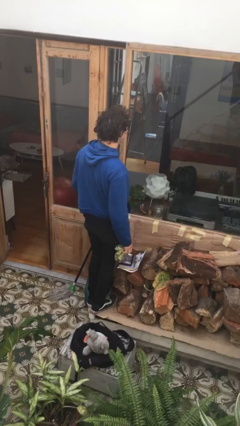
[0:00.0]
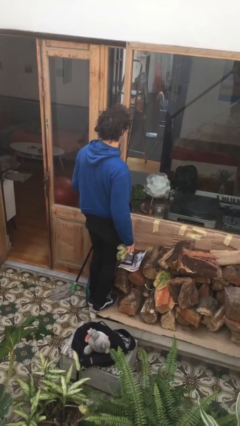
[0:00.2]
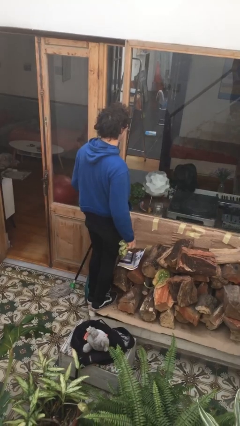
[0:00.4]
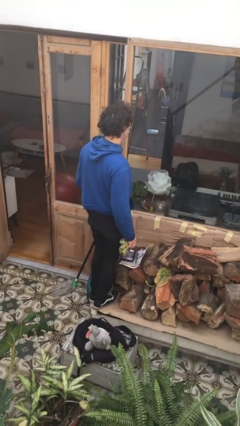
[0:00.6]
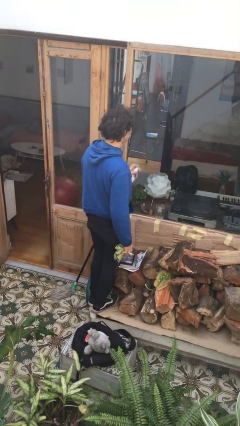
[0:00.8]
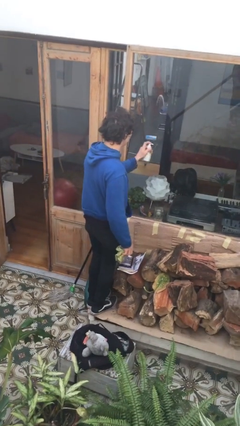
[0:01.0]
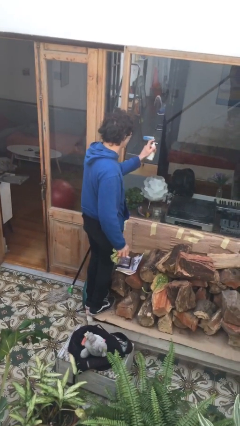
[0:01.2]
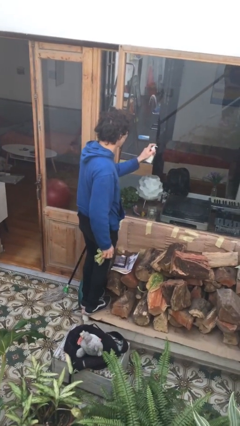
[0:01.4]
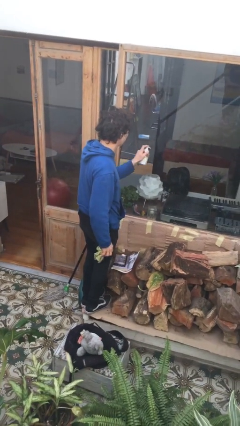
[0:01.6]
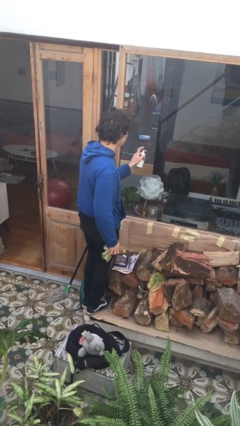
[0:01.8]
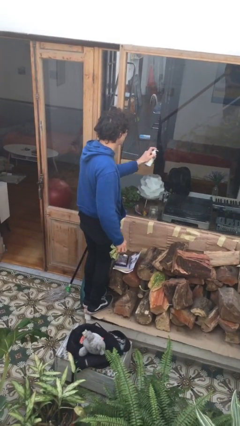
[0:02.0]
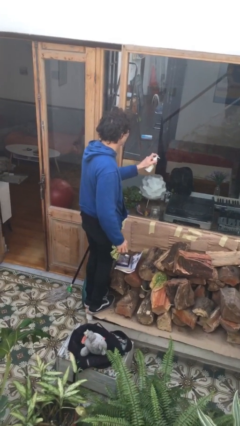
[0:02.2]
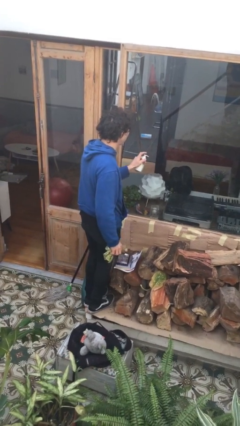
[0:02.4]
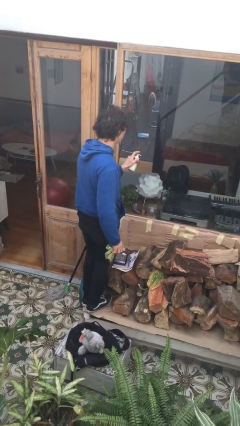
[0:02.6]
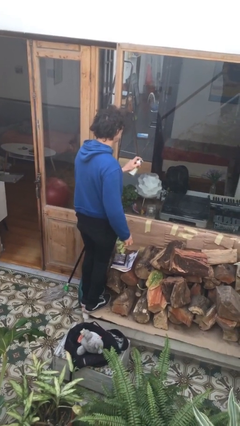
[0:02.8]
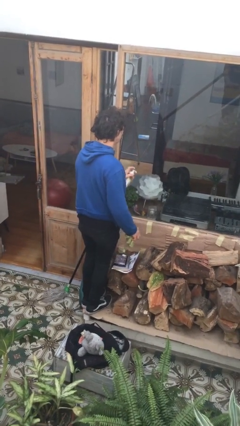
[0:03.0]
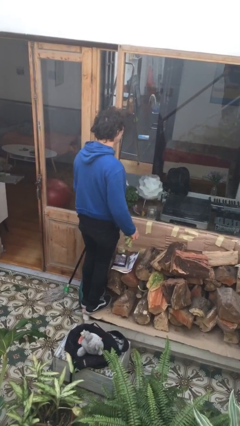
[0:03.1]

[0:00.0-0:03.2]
person sprays from bottle

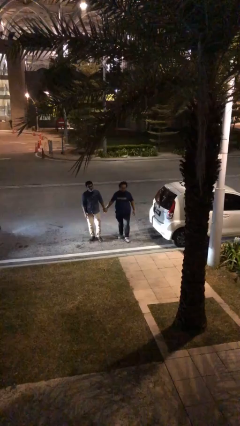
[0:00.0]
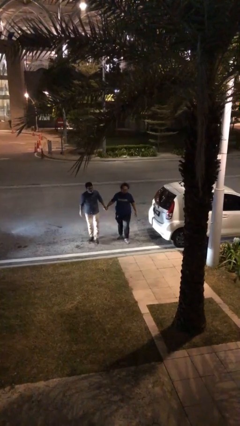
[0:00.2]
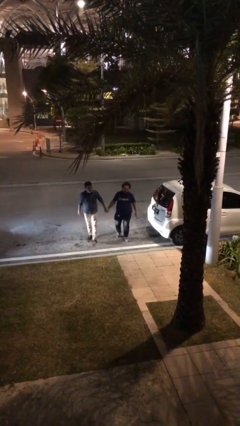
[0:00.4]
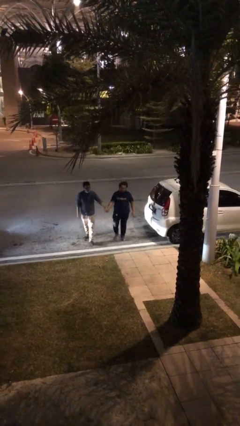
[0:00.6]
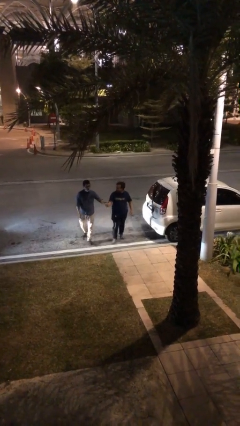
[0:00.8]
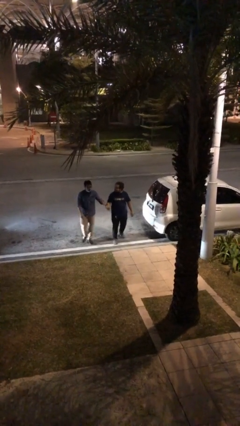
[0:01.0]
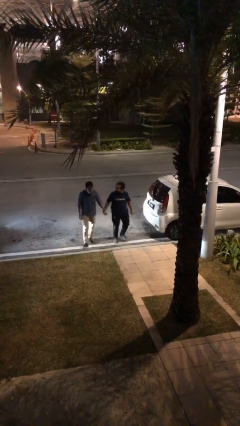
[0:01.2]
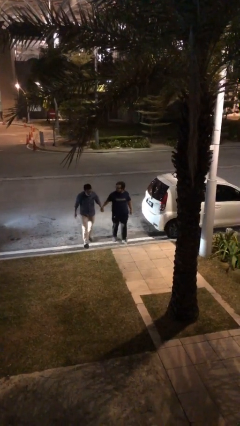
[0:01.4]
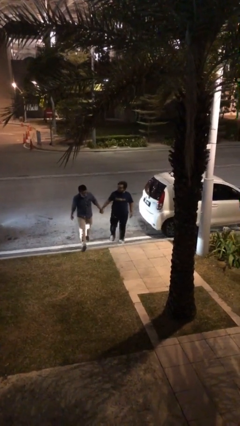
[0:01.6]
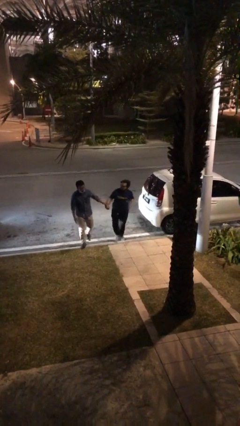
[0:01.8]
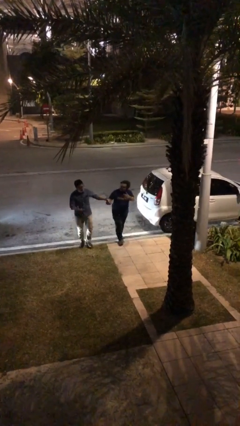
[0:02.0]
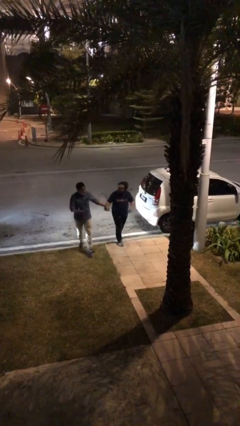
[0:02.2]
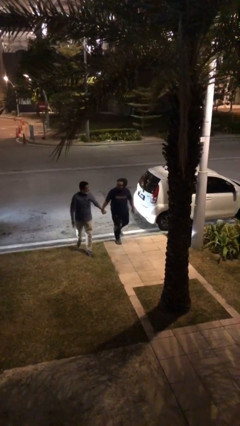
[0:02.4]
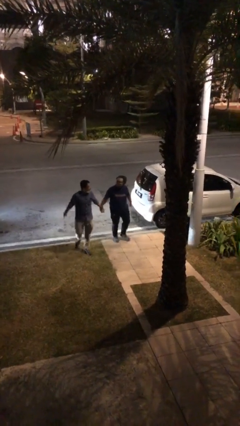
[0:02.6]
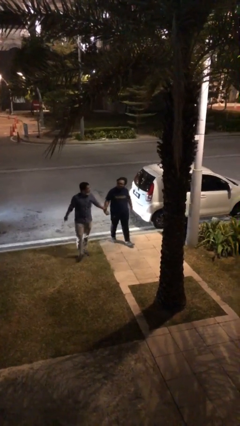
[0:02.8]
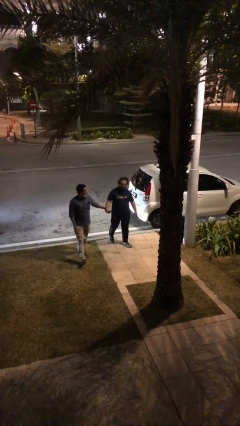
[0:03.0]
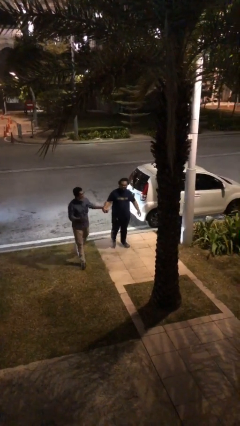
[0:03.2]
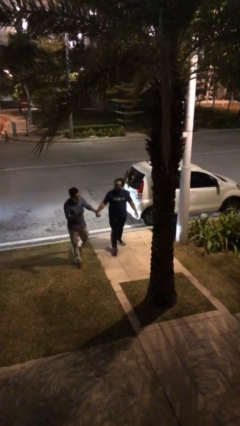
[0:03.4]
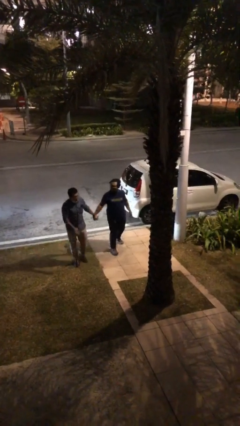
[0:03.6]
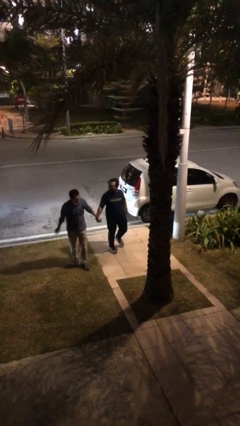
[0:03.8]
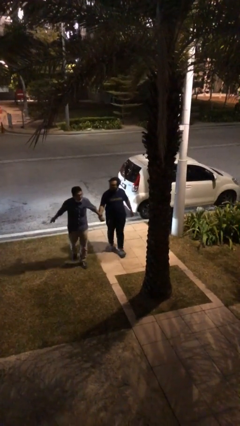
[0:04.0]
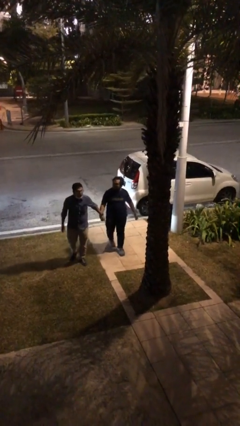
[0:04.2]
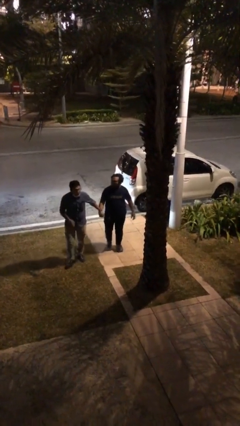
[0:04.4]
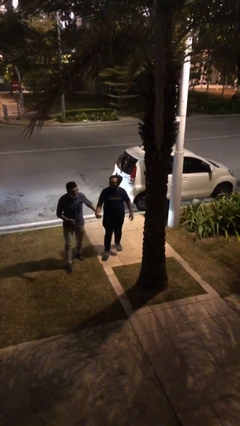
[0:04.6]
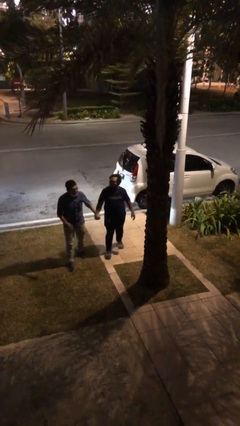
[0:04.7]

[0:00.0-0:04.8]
person holds hand

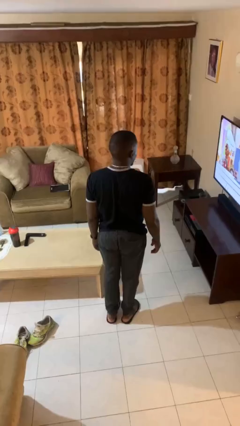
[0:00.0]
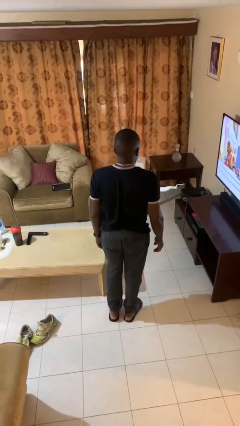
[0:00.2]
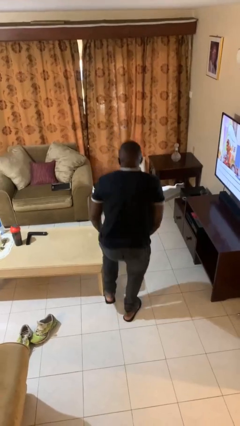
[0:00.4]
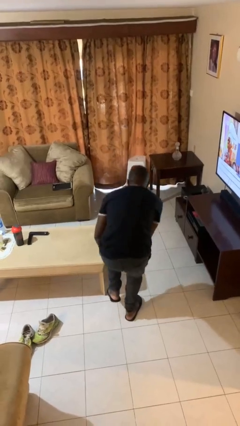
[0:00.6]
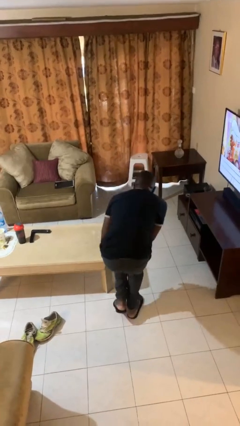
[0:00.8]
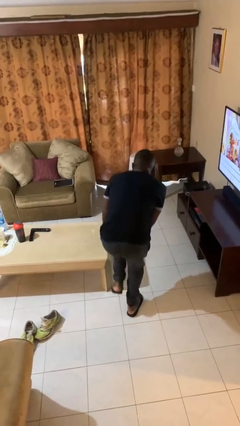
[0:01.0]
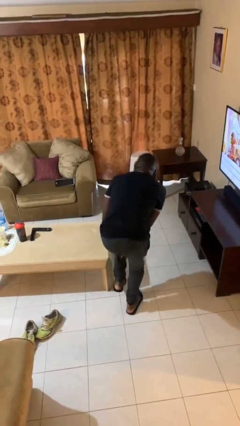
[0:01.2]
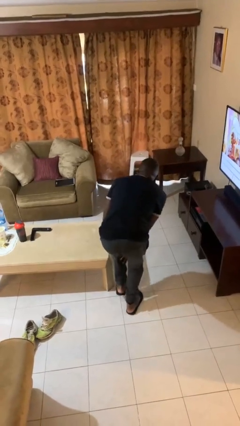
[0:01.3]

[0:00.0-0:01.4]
person bumps into table

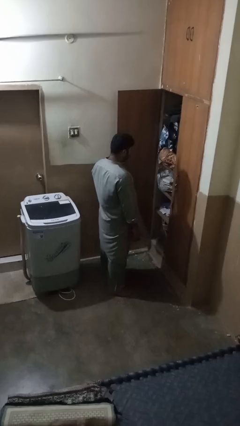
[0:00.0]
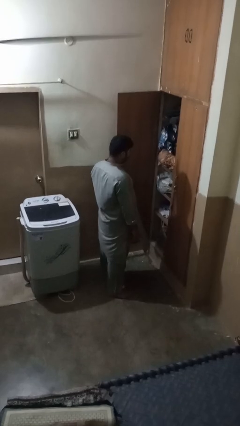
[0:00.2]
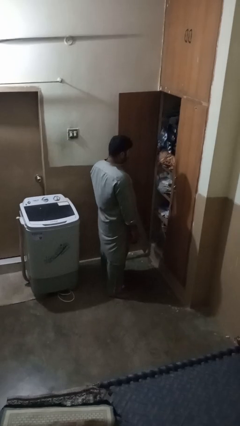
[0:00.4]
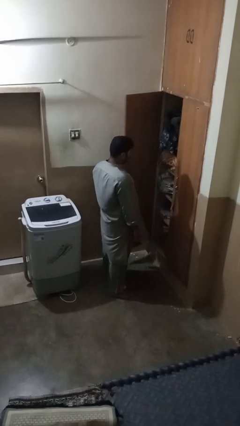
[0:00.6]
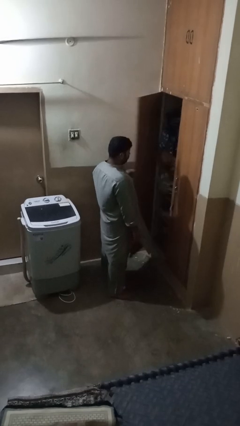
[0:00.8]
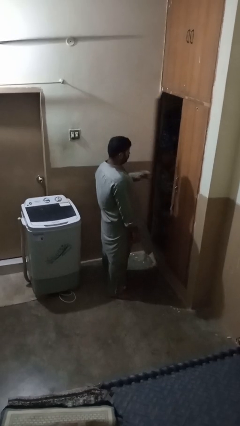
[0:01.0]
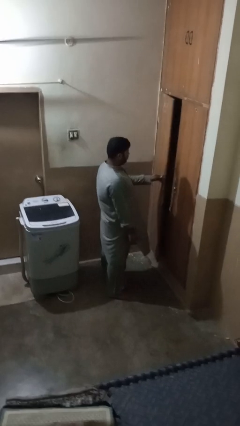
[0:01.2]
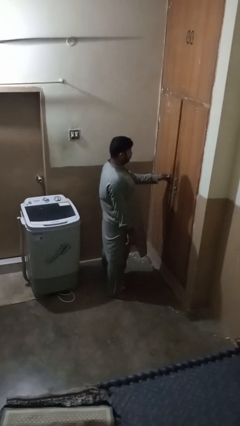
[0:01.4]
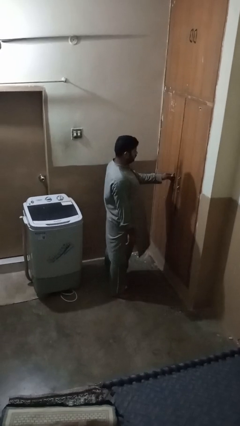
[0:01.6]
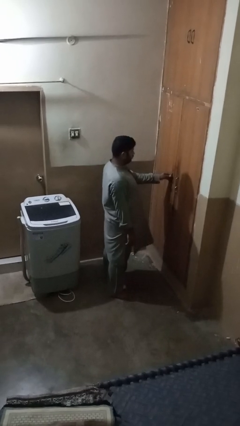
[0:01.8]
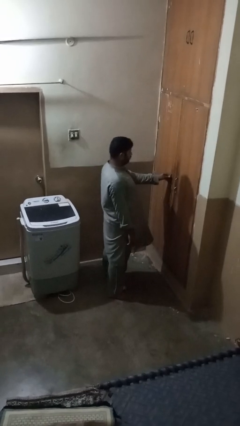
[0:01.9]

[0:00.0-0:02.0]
person closes closet door

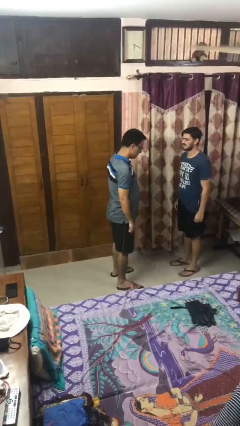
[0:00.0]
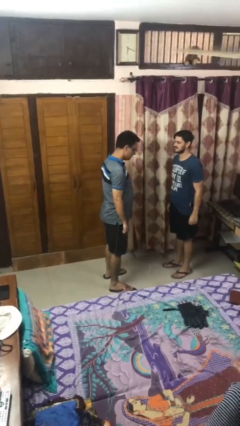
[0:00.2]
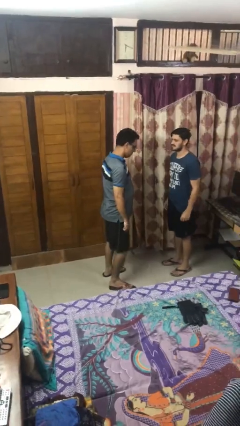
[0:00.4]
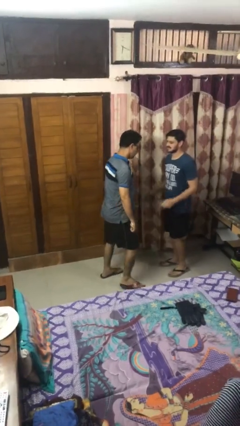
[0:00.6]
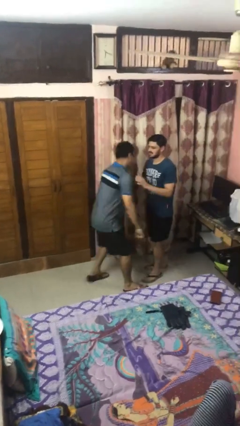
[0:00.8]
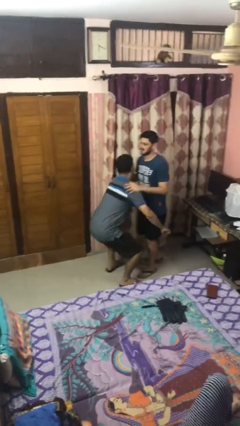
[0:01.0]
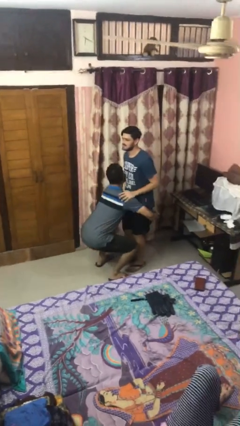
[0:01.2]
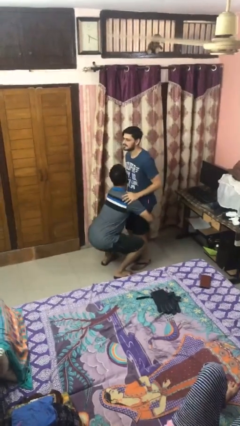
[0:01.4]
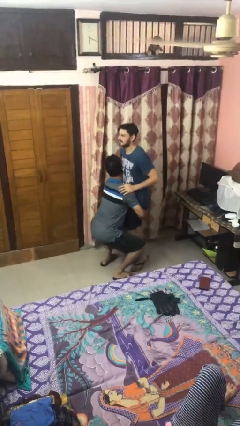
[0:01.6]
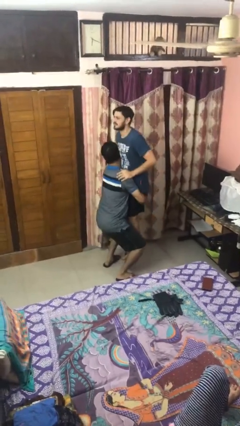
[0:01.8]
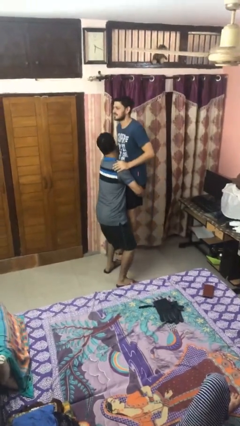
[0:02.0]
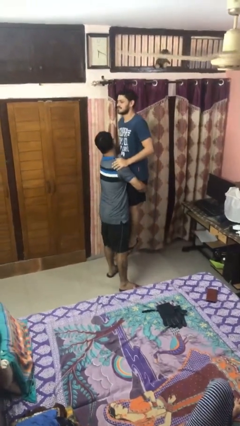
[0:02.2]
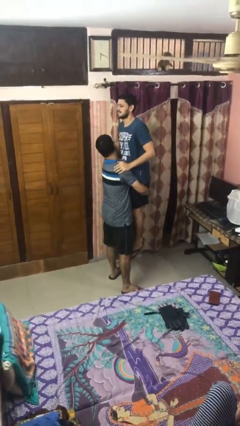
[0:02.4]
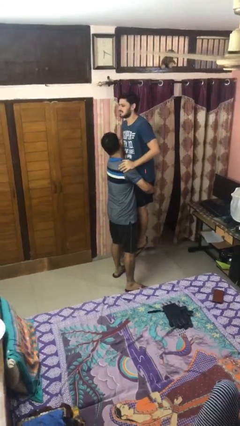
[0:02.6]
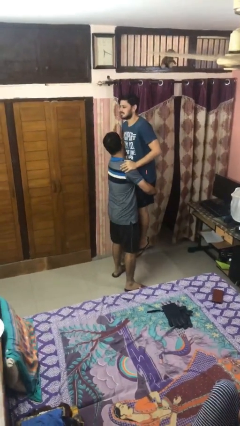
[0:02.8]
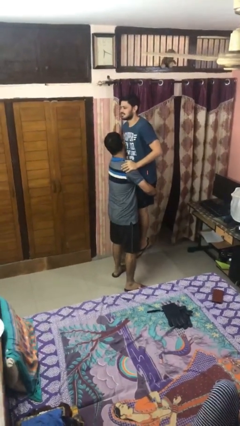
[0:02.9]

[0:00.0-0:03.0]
person picks up person

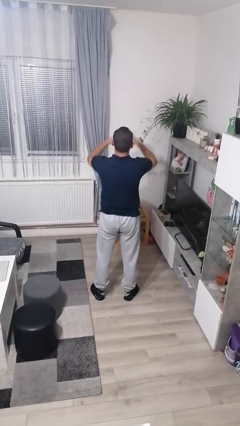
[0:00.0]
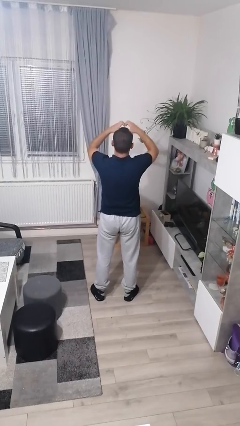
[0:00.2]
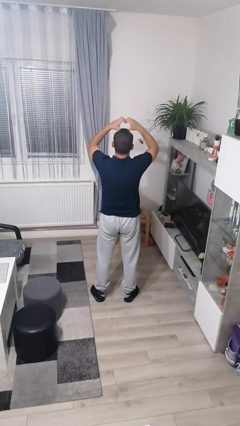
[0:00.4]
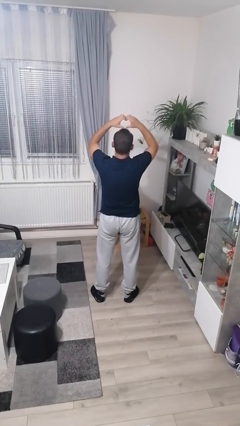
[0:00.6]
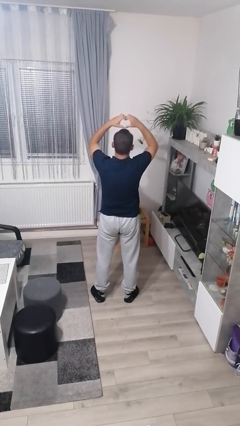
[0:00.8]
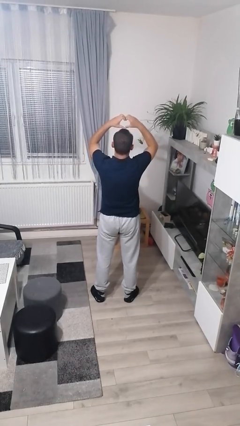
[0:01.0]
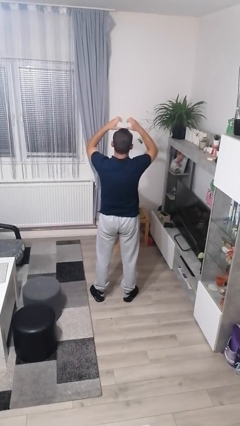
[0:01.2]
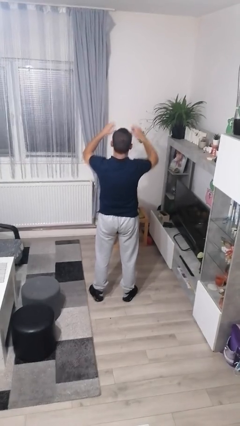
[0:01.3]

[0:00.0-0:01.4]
person gestures heart

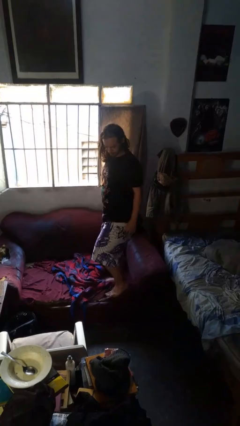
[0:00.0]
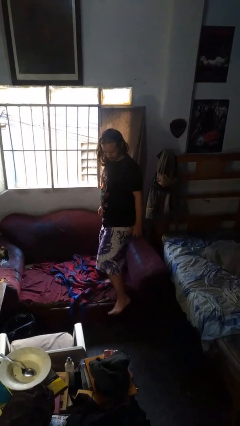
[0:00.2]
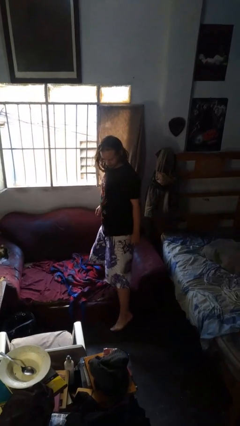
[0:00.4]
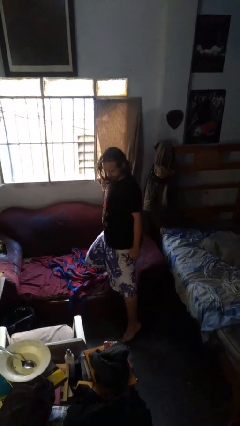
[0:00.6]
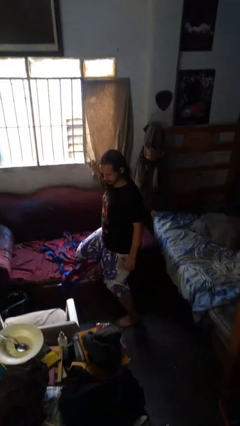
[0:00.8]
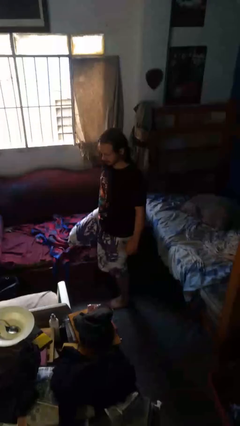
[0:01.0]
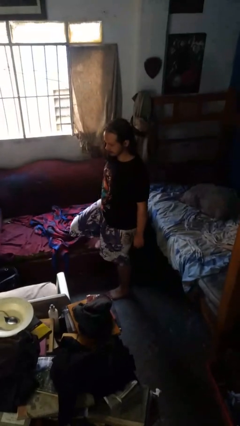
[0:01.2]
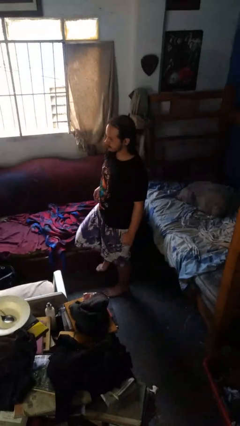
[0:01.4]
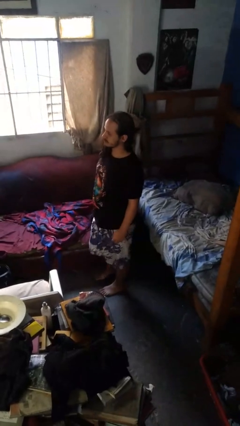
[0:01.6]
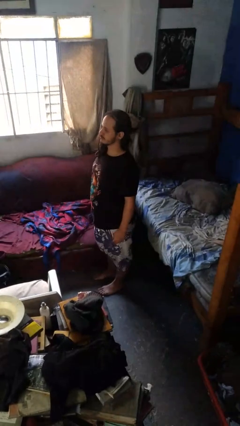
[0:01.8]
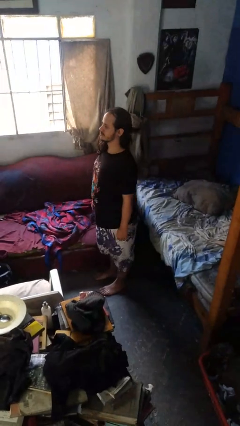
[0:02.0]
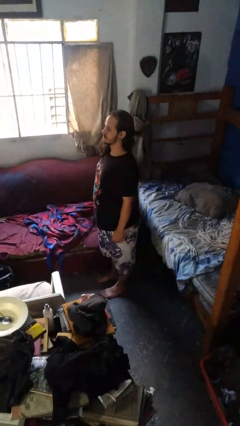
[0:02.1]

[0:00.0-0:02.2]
person climbs off couch
